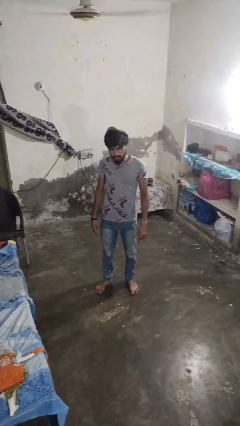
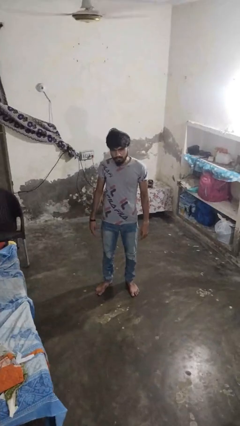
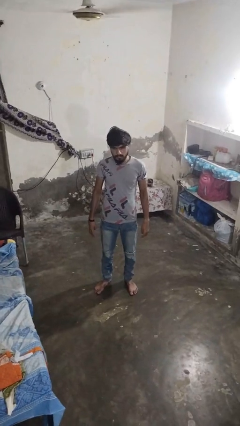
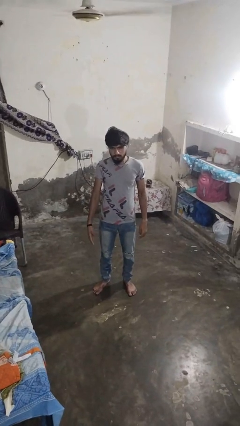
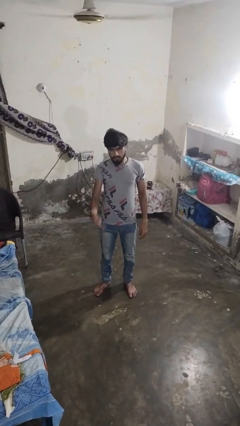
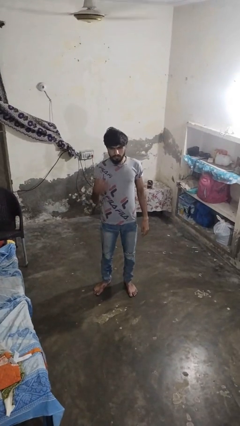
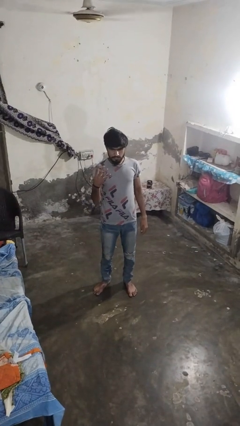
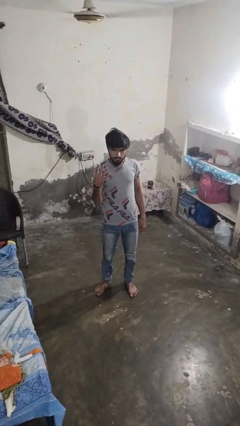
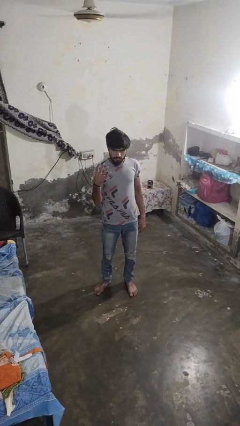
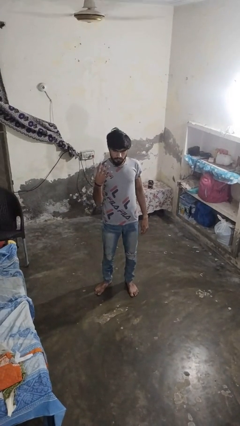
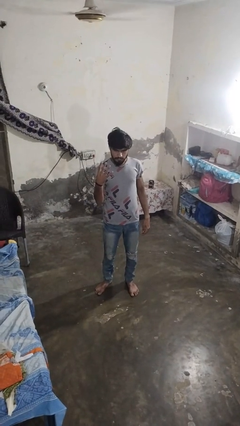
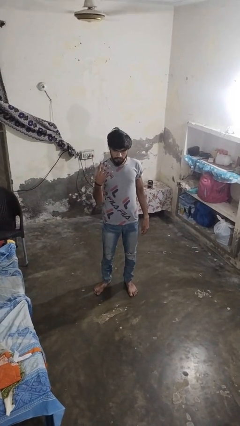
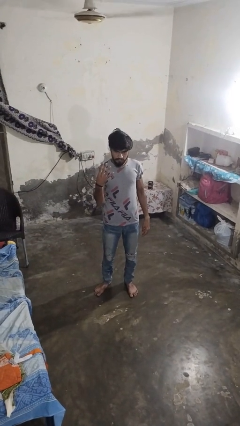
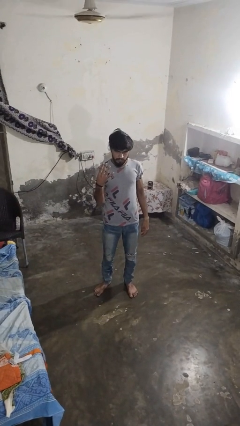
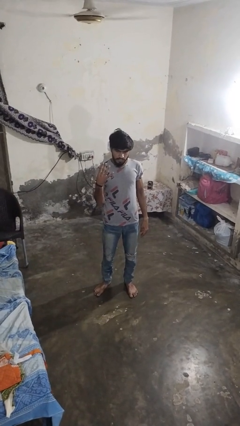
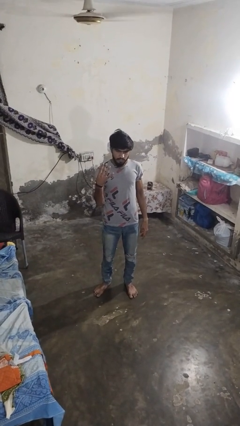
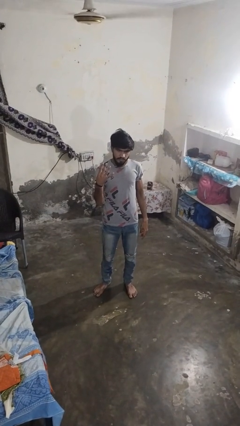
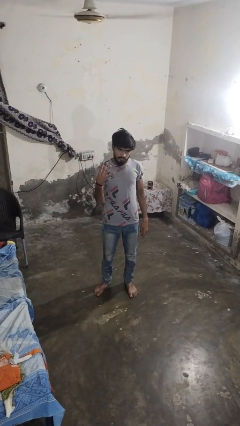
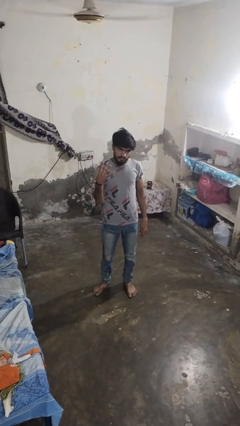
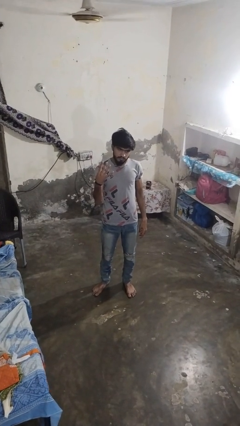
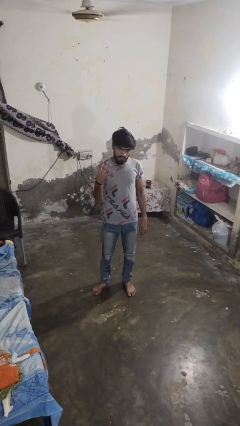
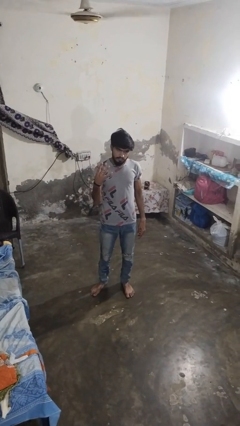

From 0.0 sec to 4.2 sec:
person gestures number four

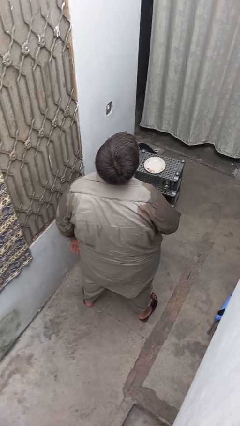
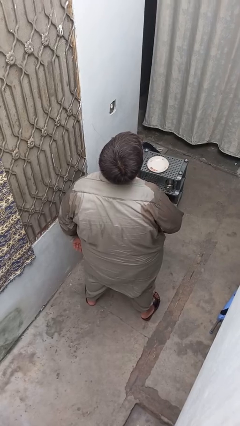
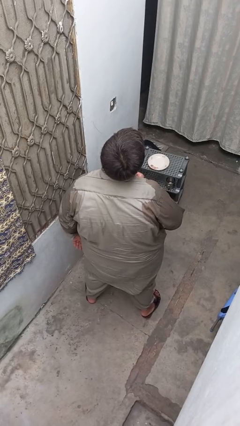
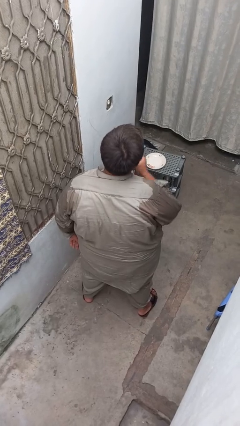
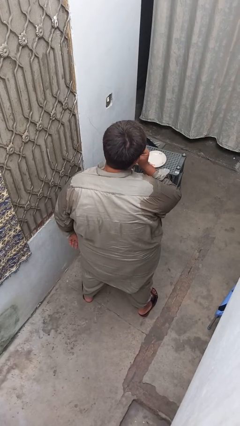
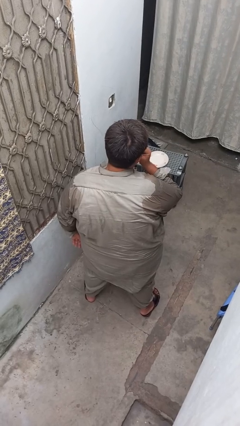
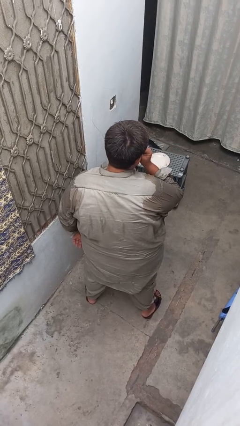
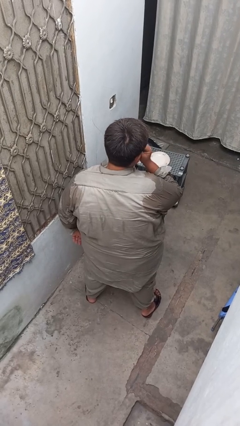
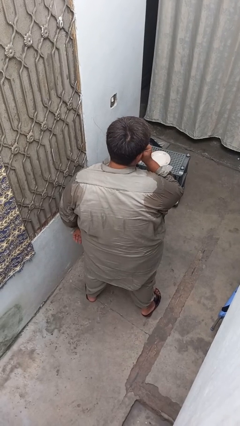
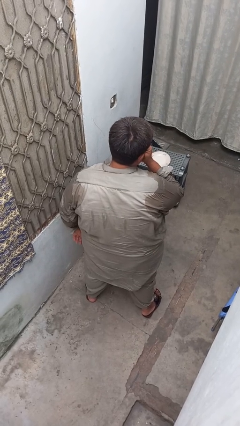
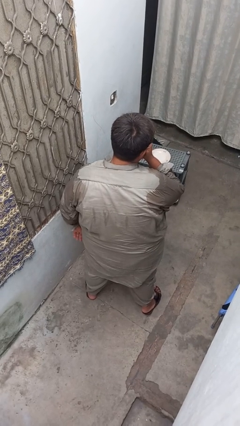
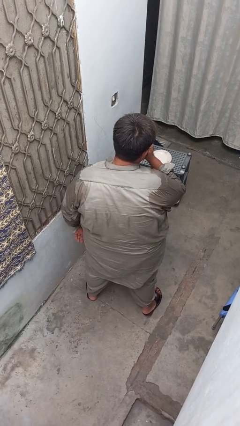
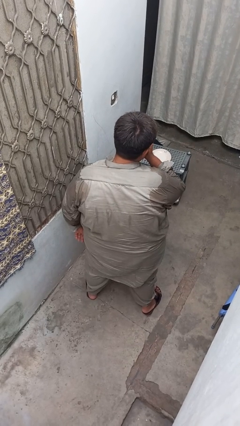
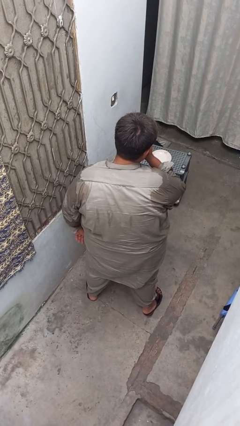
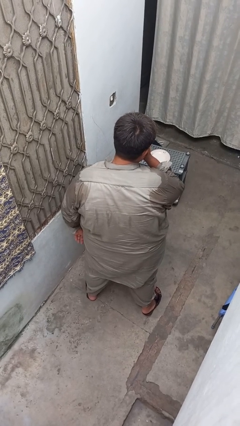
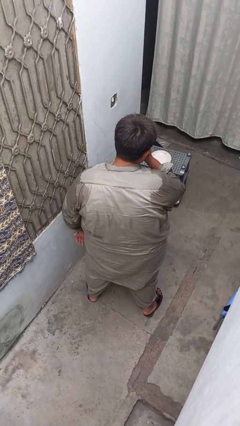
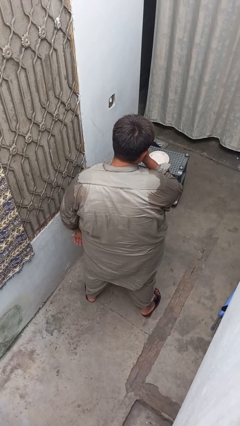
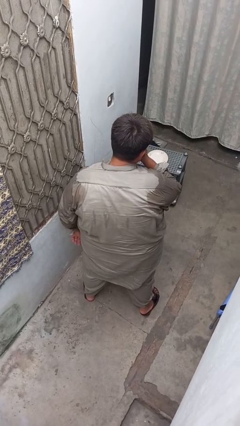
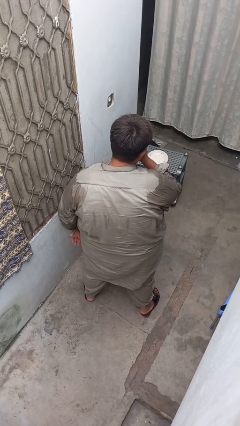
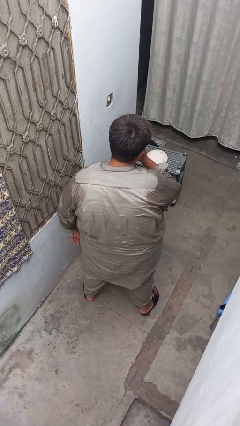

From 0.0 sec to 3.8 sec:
person flosses

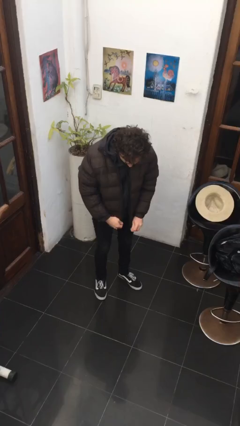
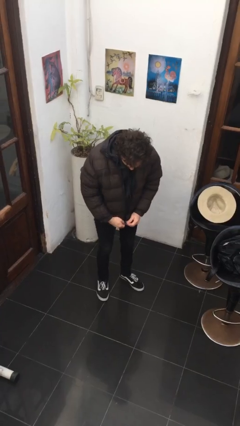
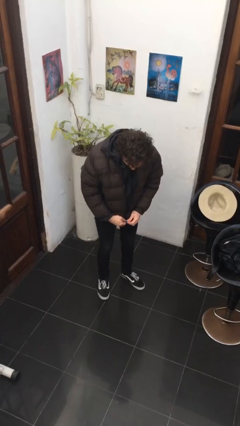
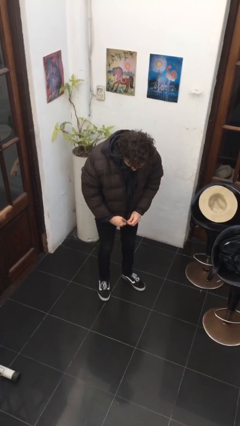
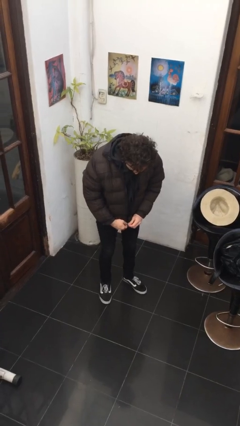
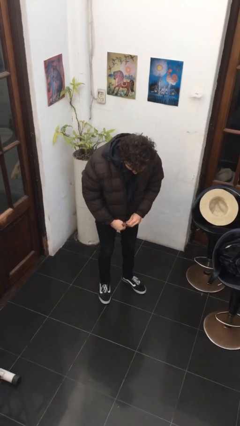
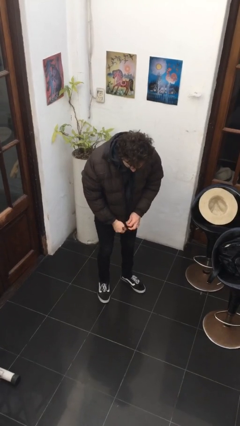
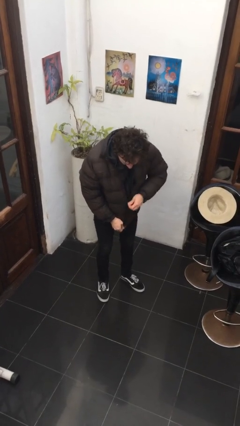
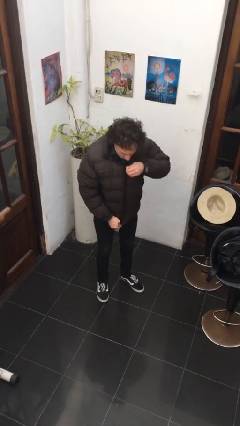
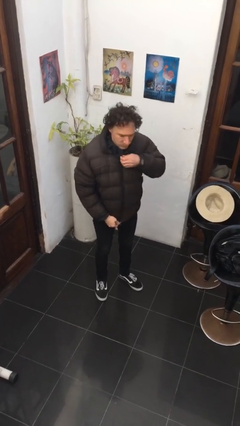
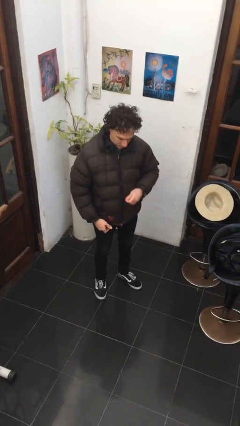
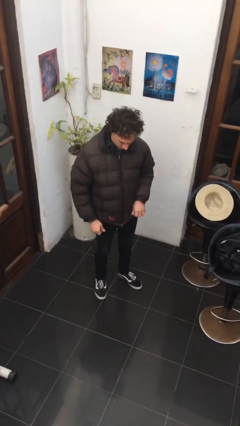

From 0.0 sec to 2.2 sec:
person zips up jacket

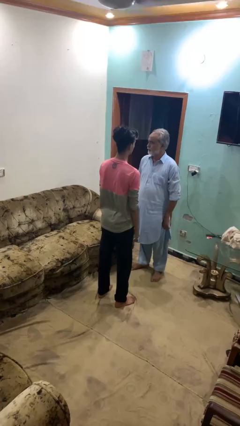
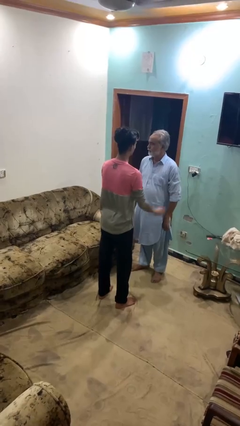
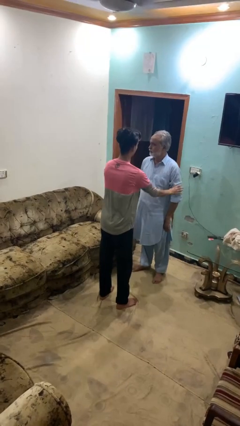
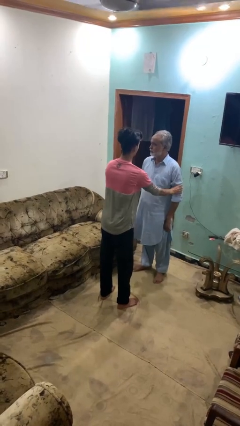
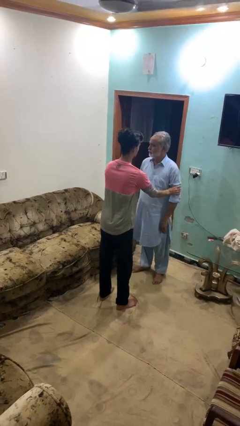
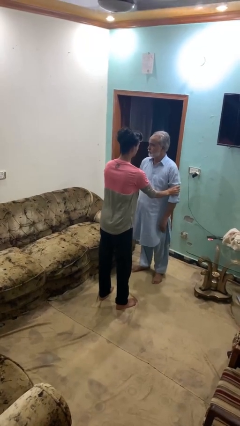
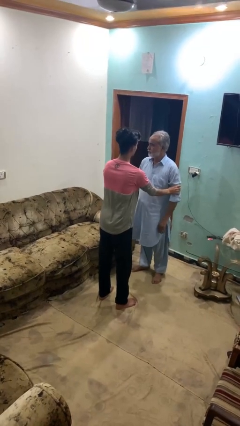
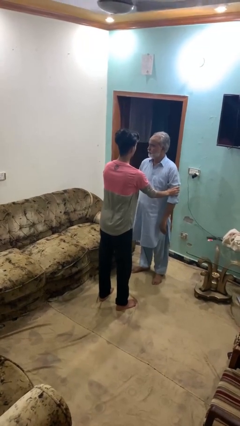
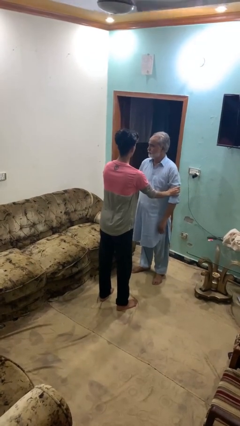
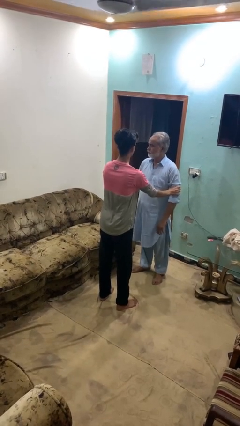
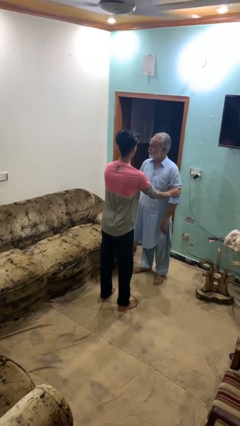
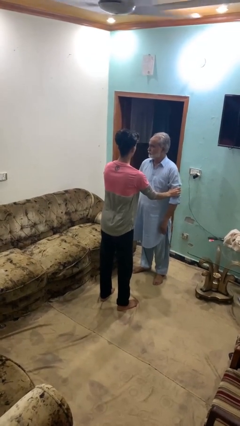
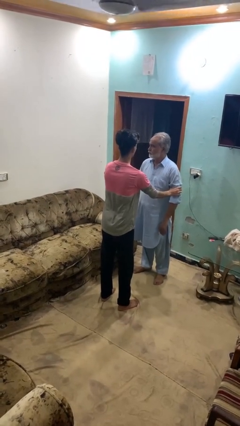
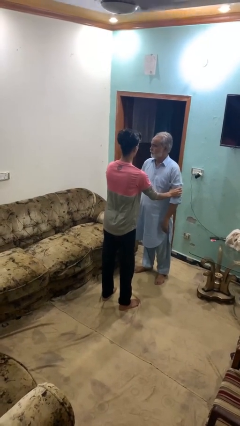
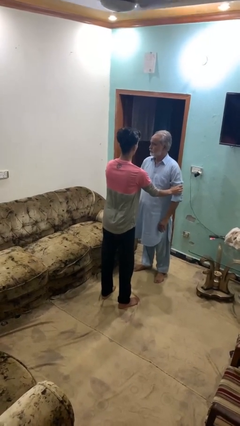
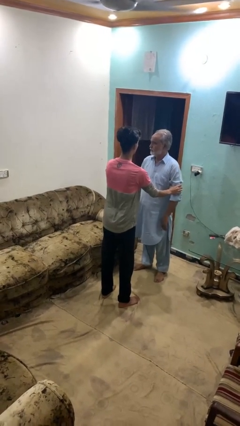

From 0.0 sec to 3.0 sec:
person grabs person by bicep

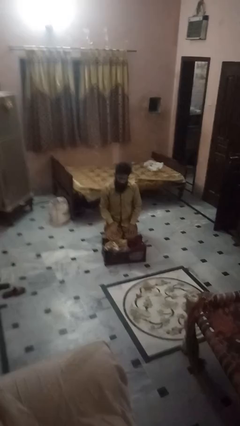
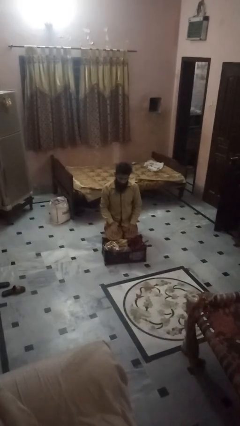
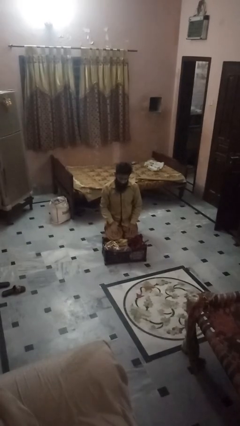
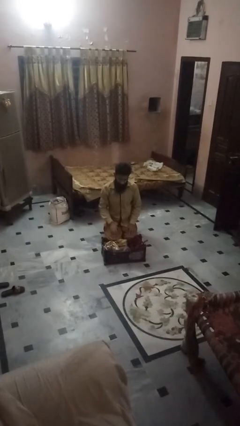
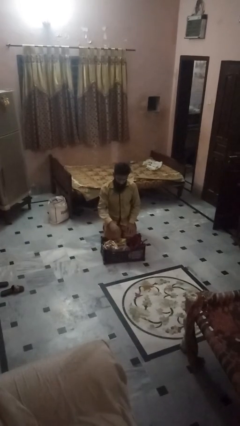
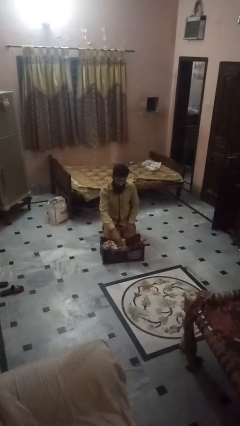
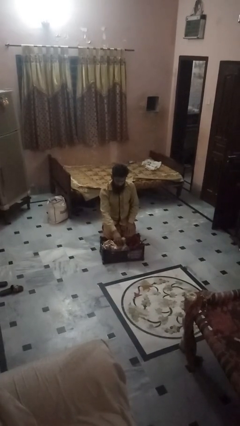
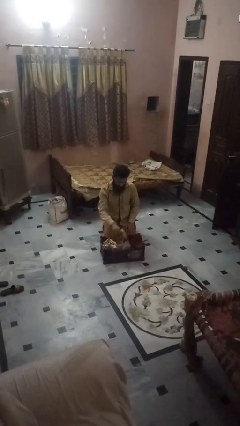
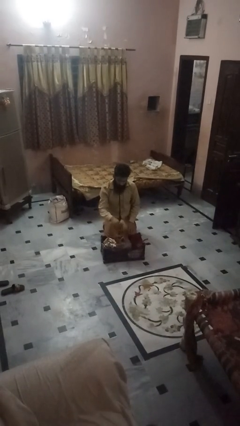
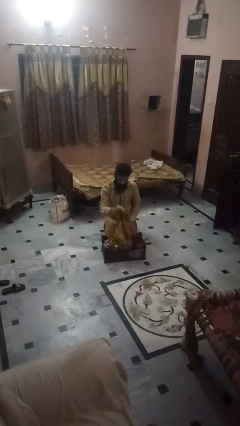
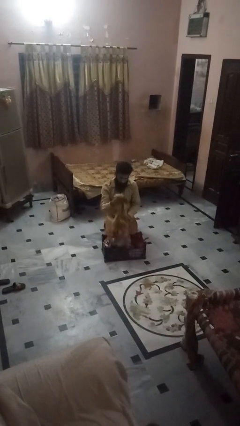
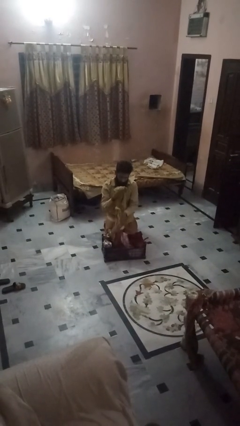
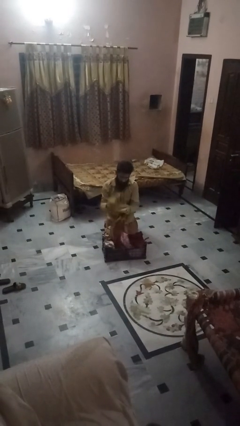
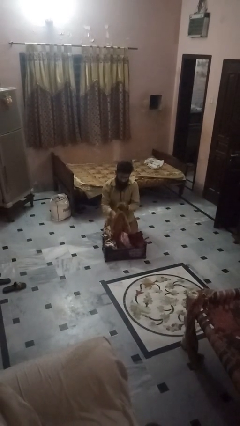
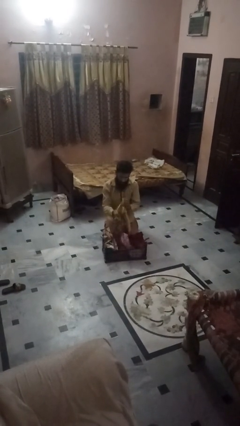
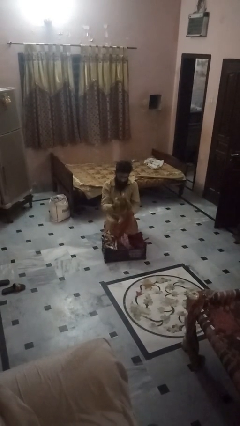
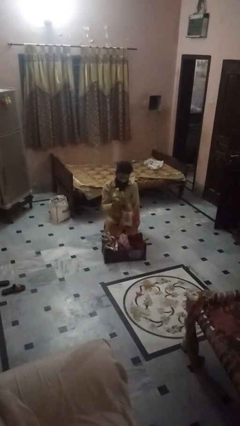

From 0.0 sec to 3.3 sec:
person puts object into basket

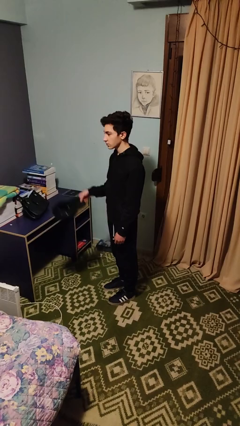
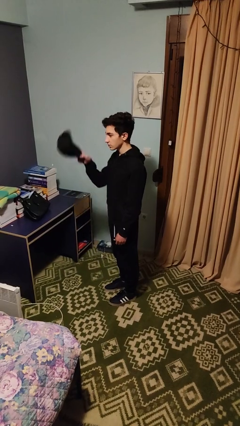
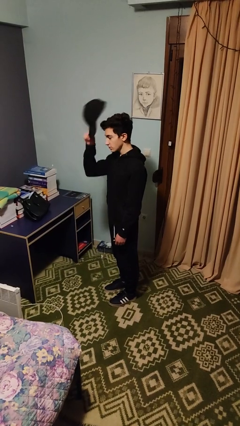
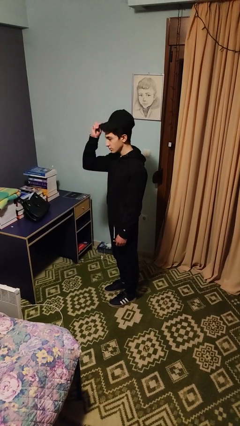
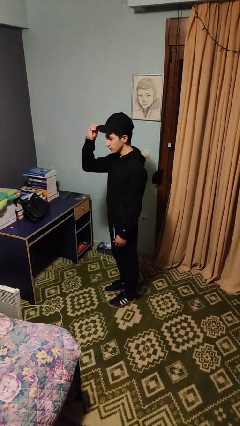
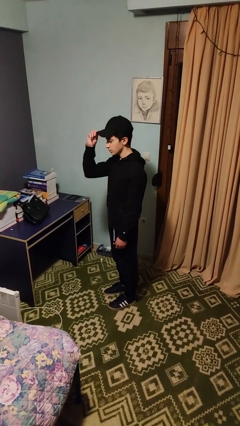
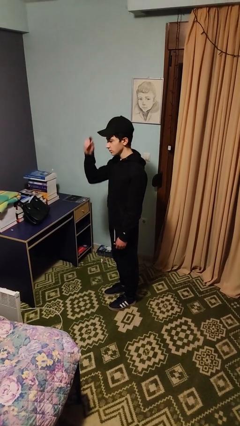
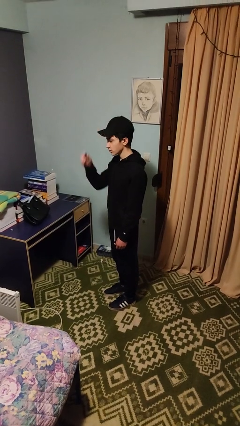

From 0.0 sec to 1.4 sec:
person puts on hat
